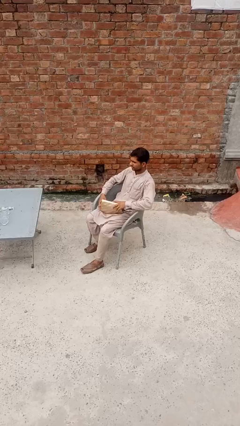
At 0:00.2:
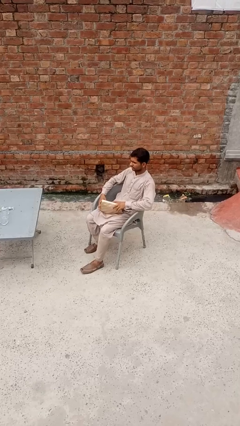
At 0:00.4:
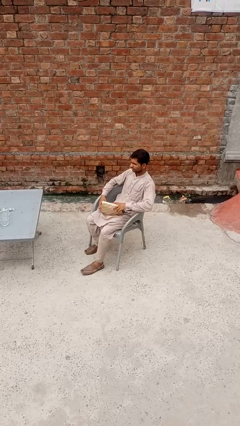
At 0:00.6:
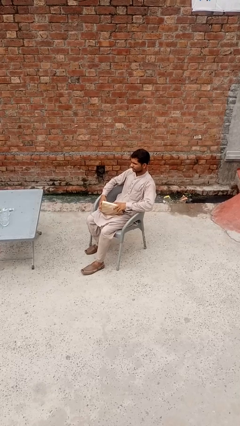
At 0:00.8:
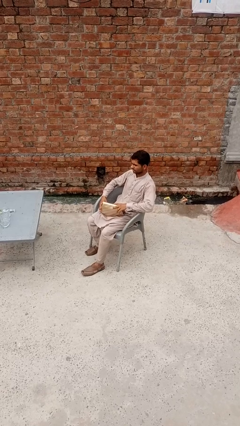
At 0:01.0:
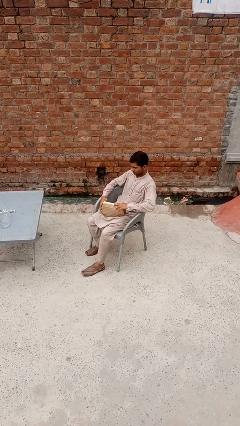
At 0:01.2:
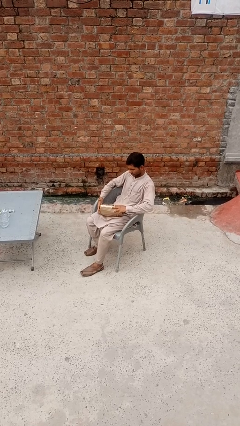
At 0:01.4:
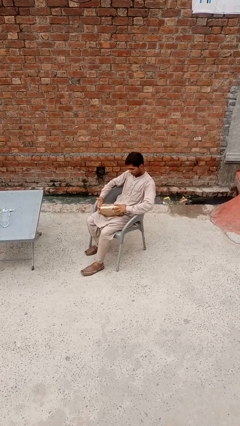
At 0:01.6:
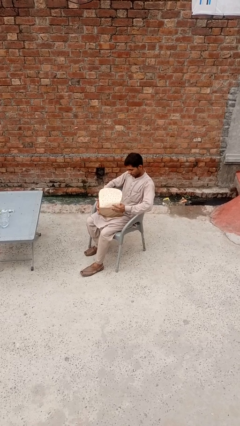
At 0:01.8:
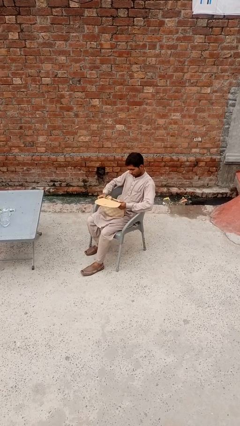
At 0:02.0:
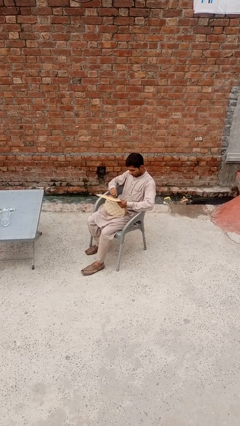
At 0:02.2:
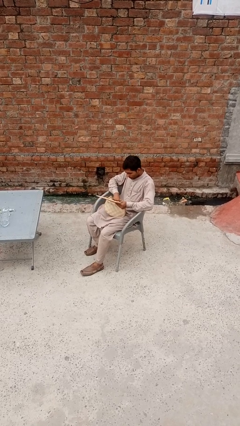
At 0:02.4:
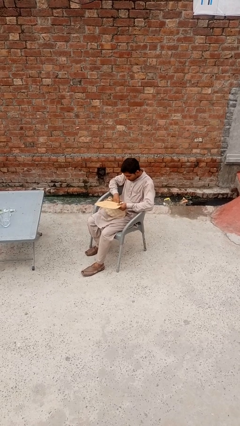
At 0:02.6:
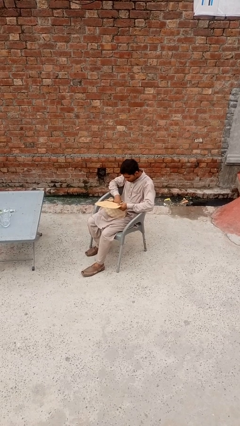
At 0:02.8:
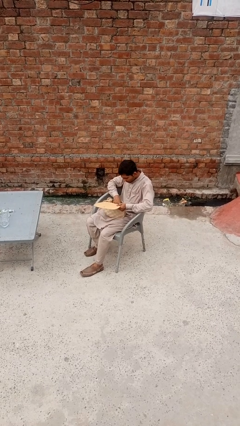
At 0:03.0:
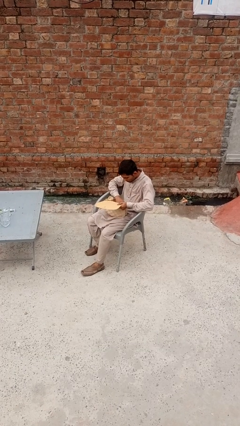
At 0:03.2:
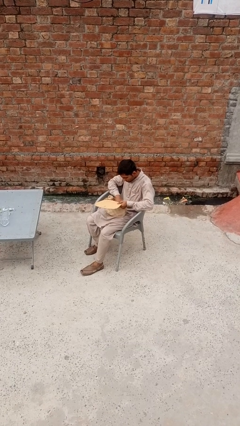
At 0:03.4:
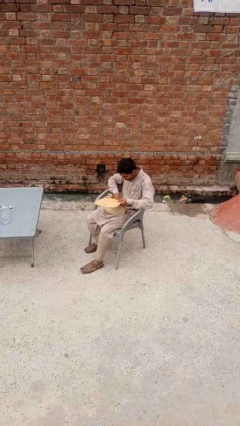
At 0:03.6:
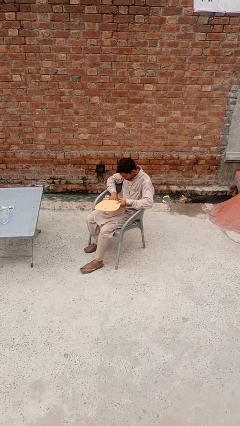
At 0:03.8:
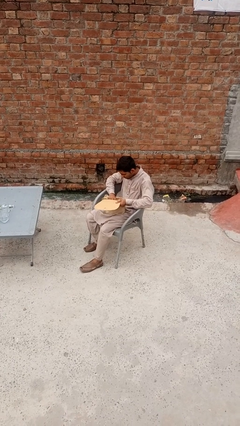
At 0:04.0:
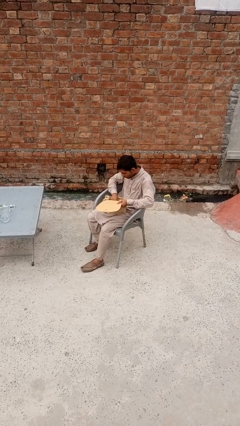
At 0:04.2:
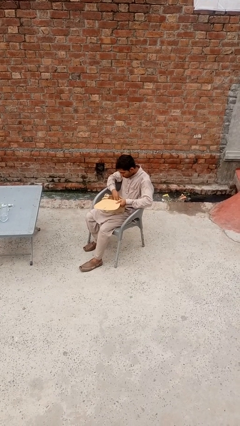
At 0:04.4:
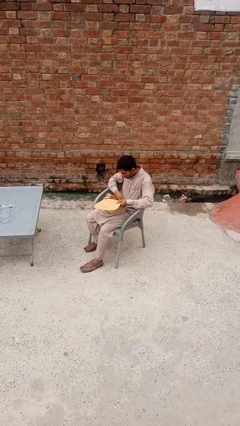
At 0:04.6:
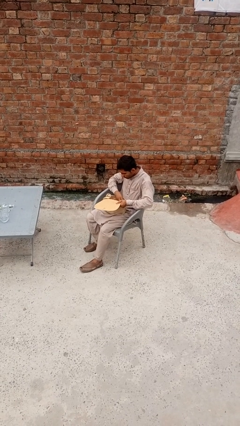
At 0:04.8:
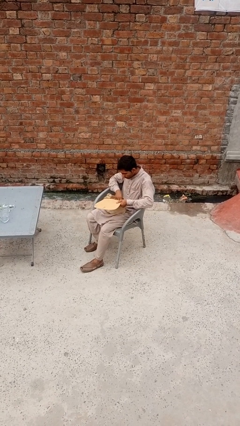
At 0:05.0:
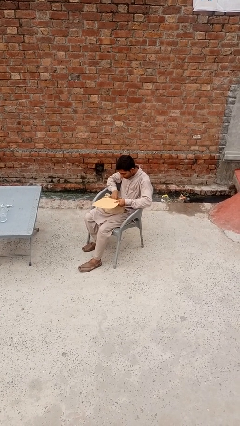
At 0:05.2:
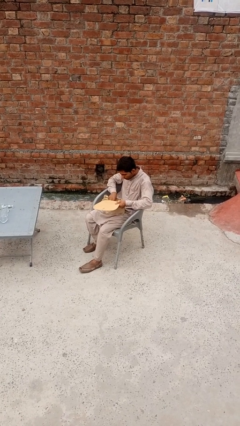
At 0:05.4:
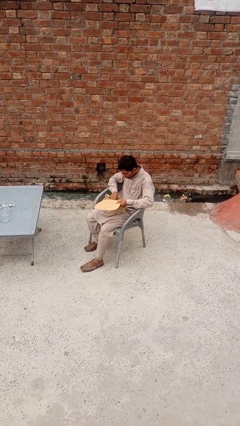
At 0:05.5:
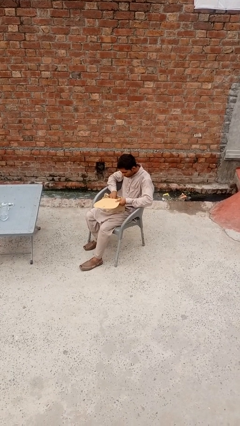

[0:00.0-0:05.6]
person searches in purse

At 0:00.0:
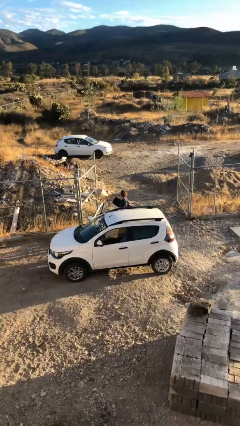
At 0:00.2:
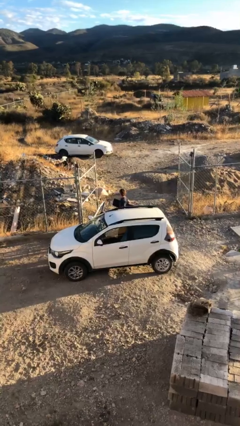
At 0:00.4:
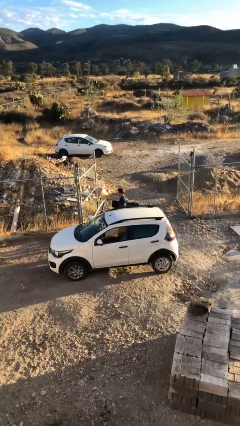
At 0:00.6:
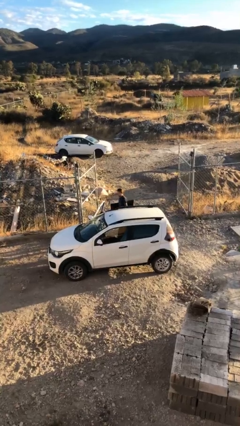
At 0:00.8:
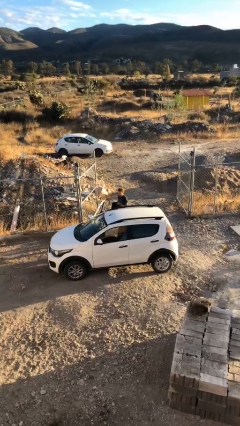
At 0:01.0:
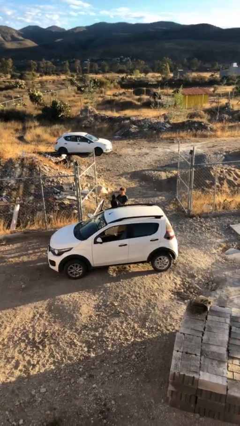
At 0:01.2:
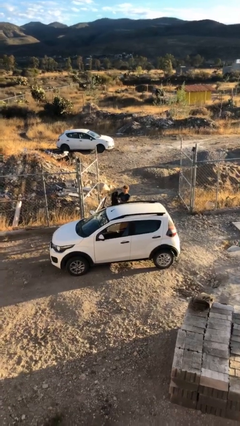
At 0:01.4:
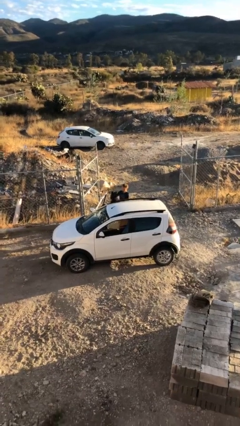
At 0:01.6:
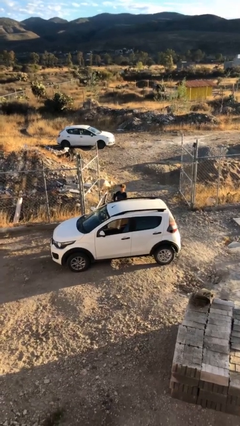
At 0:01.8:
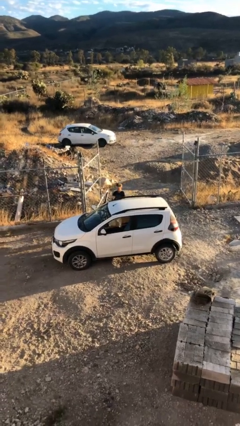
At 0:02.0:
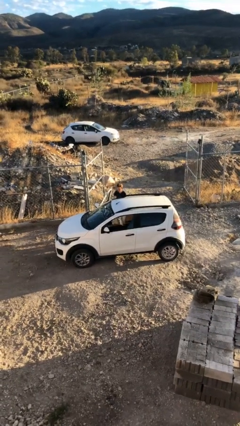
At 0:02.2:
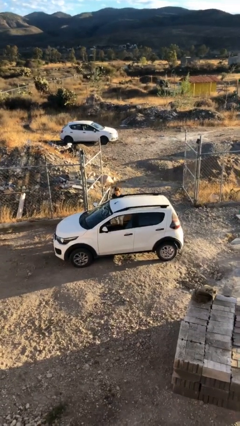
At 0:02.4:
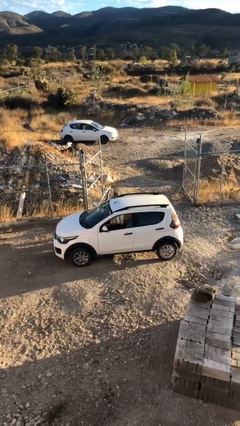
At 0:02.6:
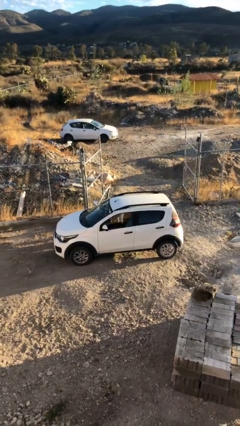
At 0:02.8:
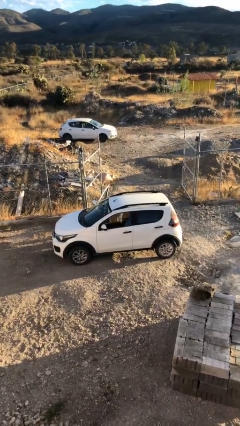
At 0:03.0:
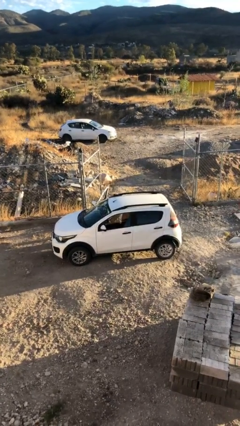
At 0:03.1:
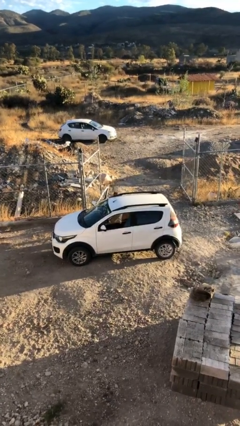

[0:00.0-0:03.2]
person loads car

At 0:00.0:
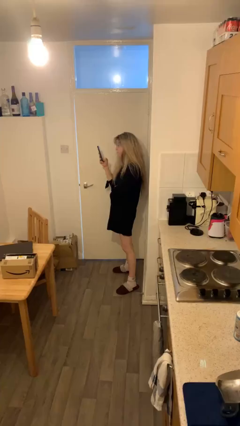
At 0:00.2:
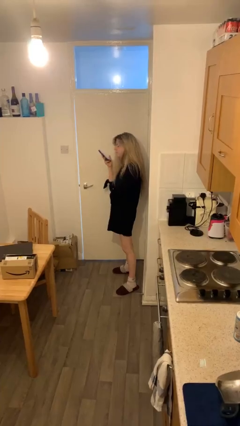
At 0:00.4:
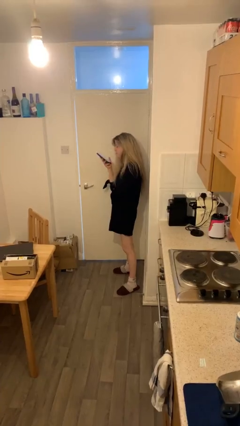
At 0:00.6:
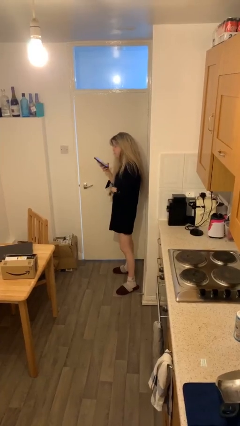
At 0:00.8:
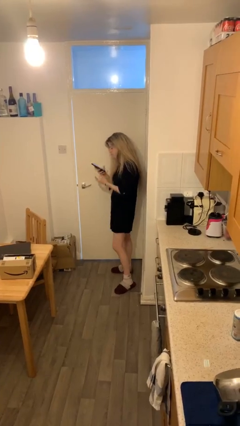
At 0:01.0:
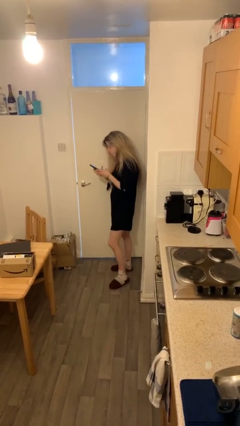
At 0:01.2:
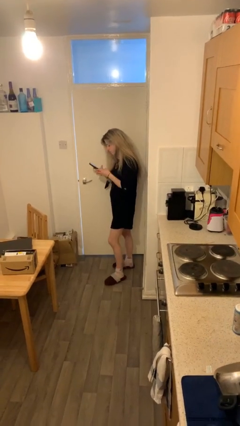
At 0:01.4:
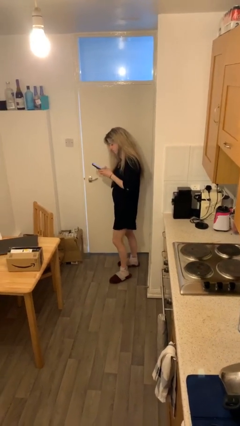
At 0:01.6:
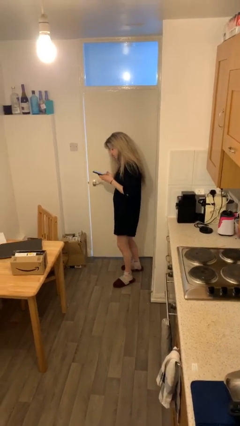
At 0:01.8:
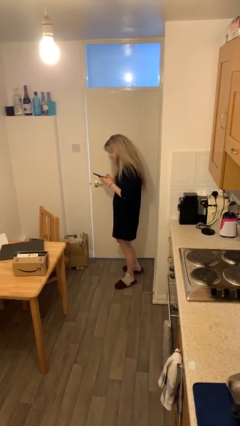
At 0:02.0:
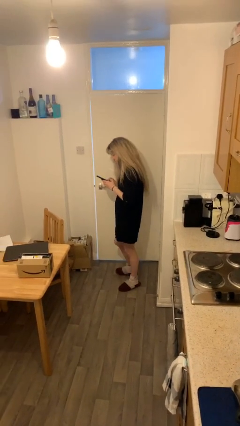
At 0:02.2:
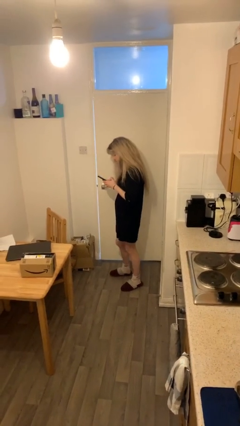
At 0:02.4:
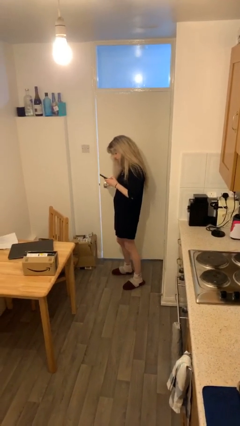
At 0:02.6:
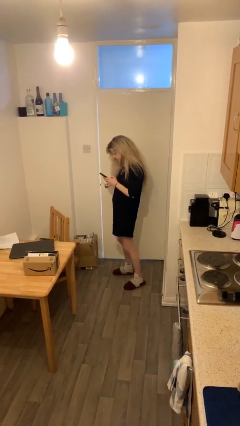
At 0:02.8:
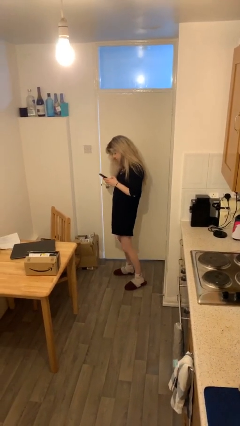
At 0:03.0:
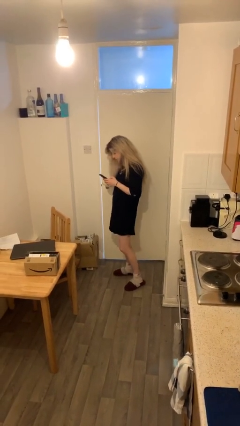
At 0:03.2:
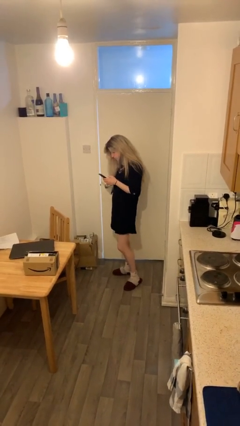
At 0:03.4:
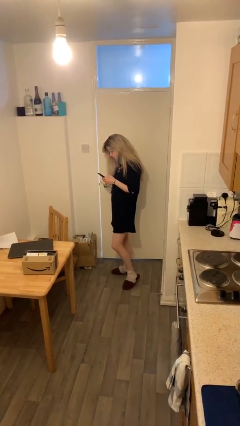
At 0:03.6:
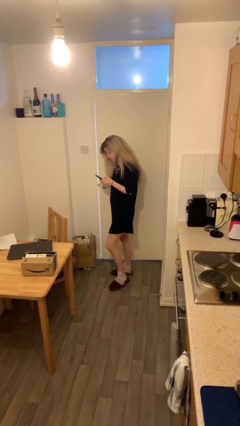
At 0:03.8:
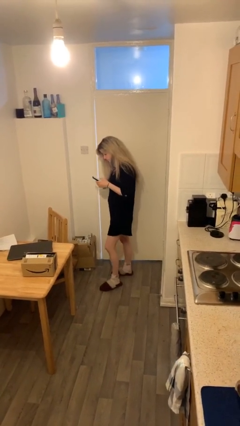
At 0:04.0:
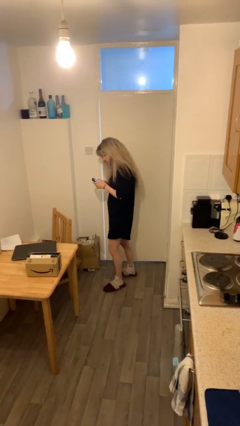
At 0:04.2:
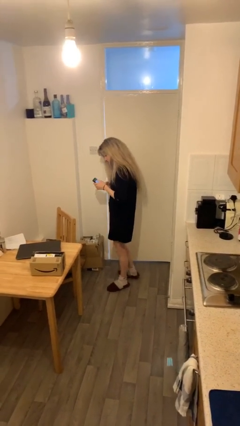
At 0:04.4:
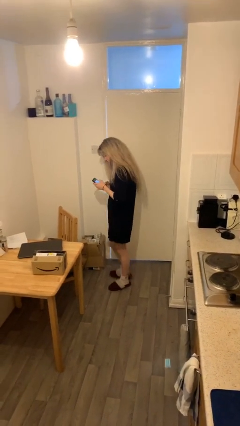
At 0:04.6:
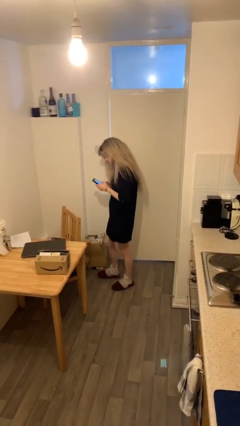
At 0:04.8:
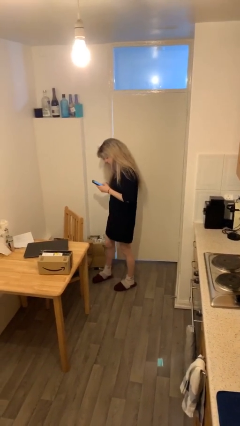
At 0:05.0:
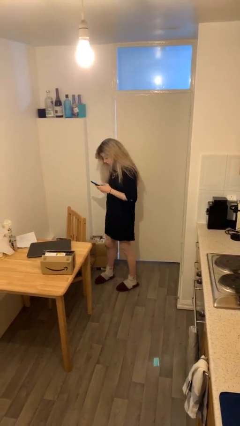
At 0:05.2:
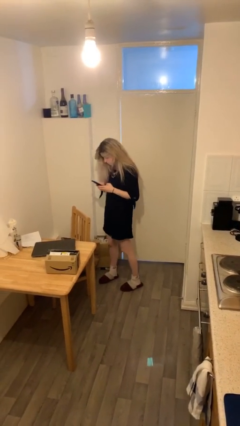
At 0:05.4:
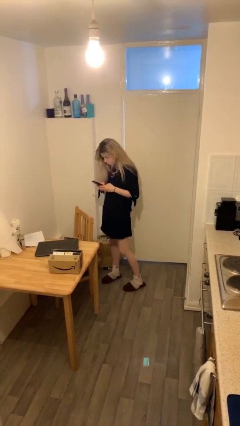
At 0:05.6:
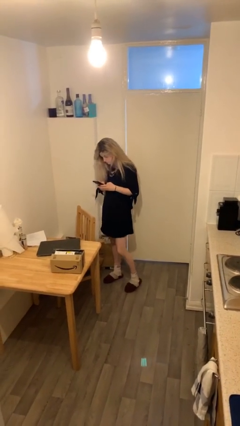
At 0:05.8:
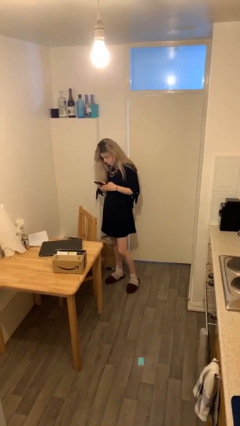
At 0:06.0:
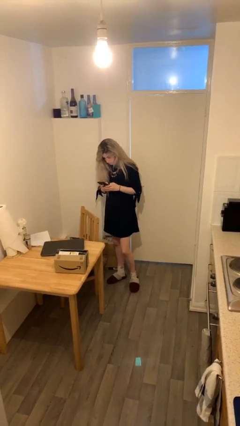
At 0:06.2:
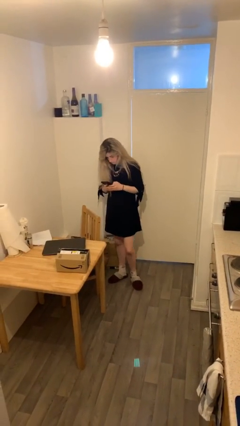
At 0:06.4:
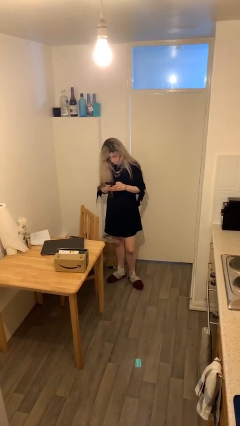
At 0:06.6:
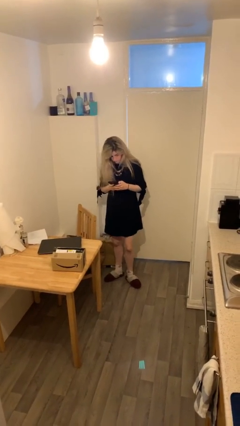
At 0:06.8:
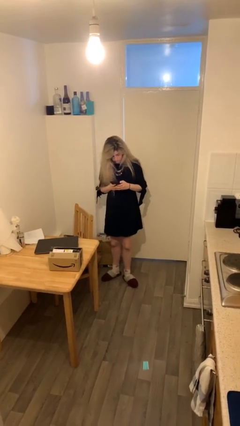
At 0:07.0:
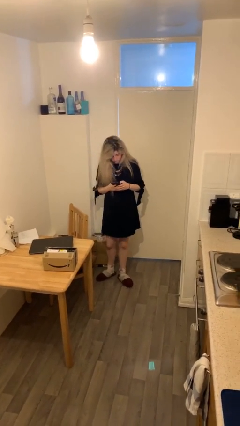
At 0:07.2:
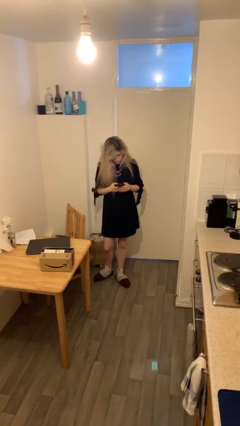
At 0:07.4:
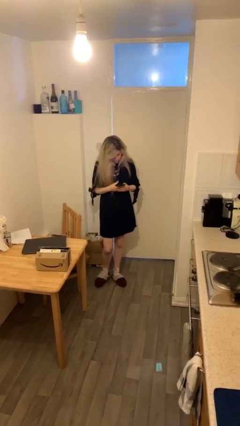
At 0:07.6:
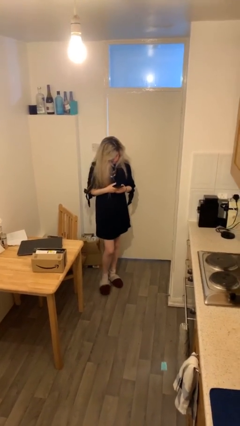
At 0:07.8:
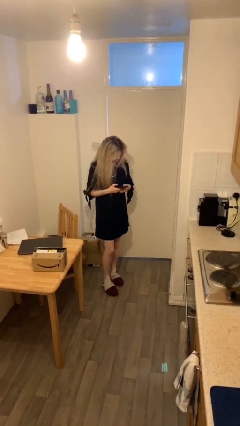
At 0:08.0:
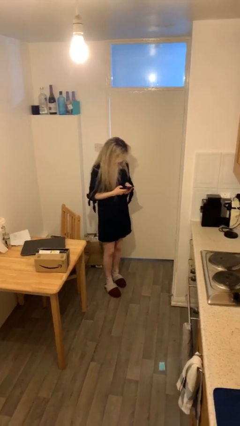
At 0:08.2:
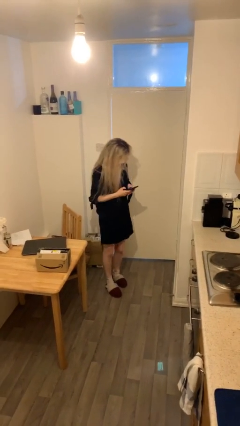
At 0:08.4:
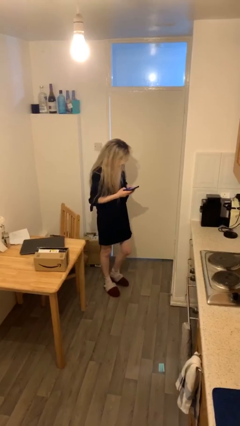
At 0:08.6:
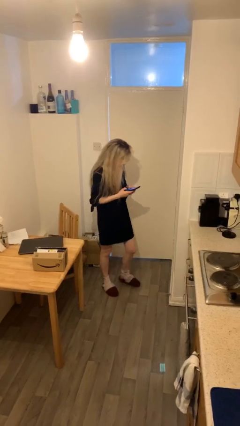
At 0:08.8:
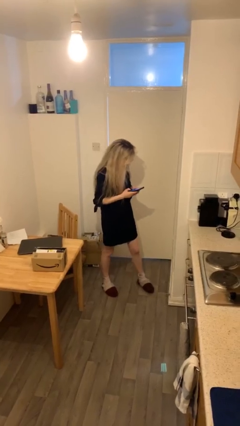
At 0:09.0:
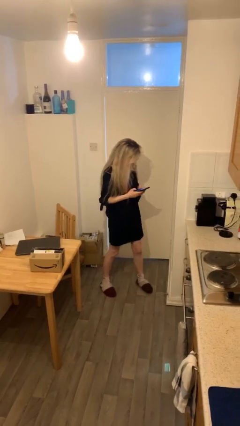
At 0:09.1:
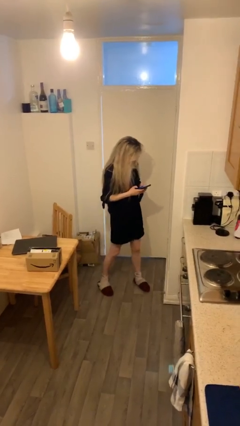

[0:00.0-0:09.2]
person texts on phone
